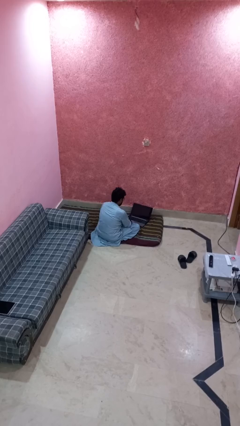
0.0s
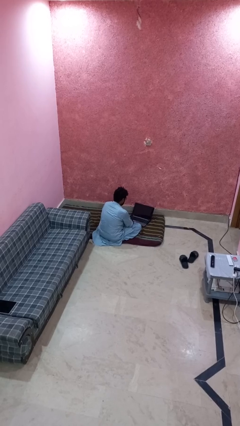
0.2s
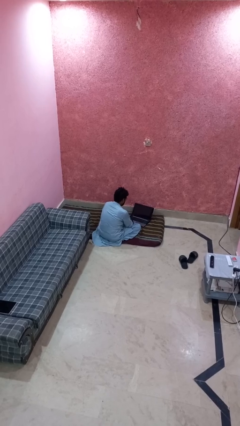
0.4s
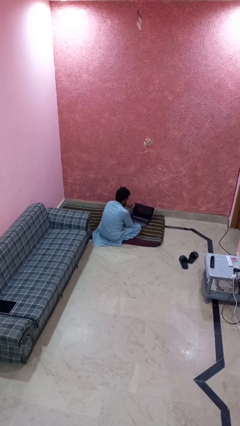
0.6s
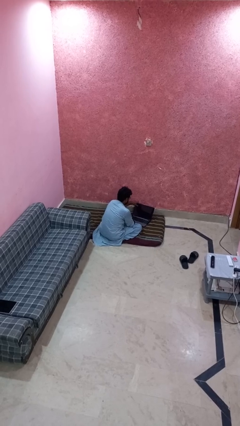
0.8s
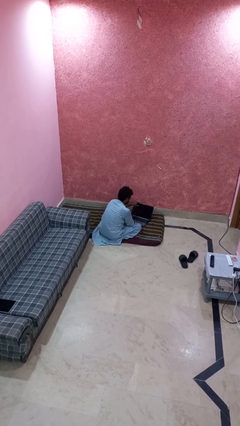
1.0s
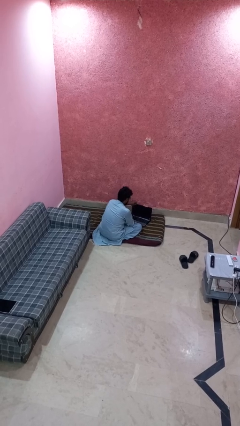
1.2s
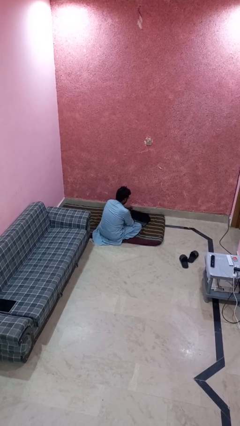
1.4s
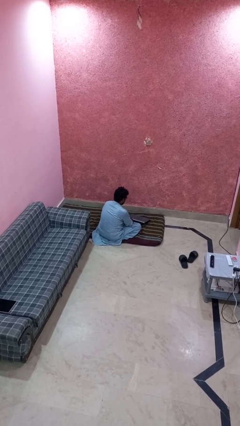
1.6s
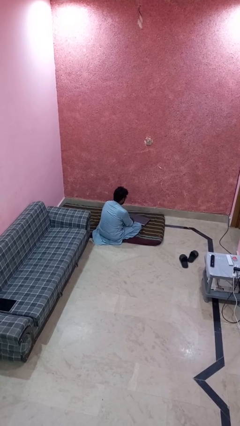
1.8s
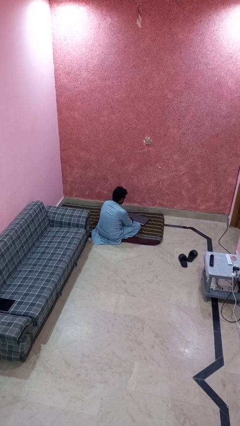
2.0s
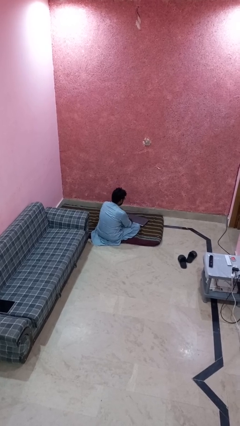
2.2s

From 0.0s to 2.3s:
person closes laptop

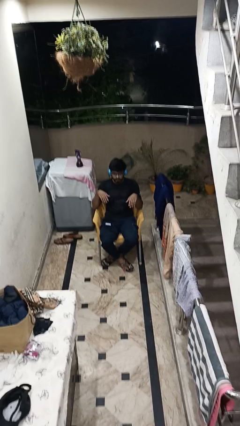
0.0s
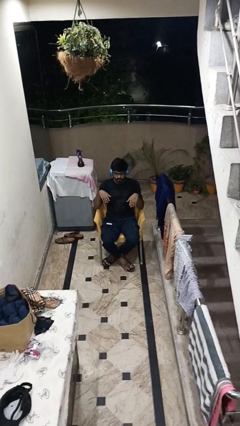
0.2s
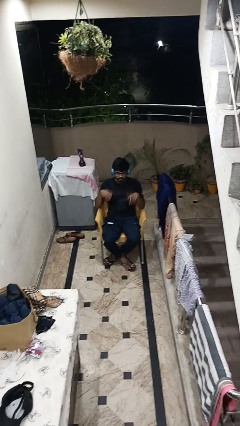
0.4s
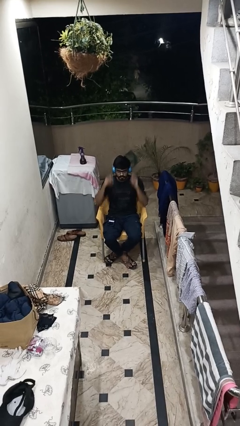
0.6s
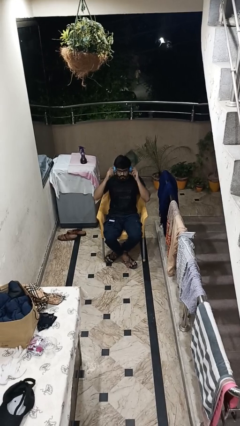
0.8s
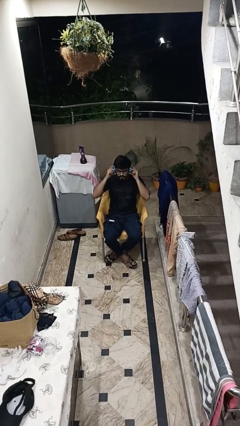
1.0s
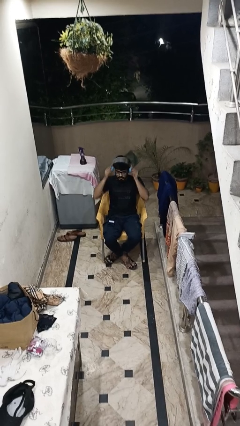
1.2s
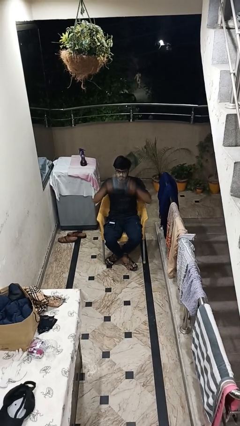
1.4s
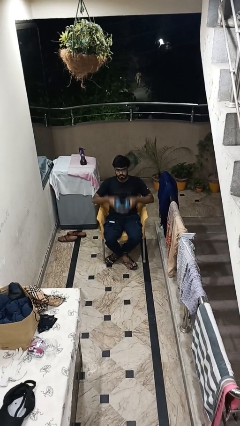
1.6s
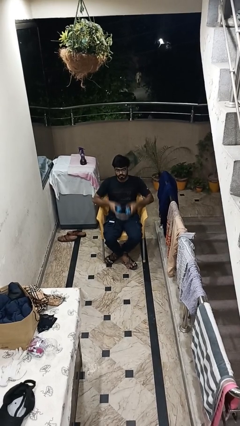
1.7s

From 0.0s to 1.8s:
person takes off headphones

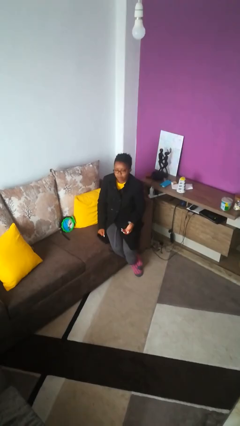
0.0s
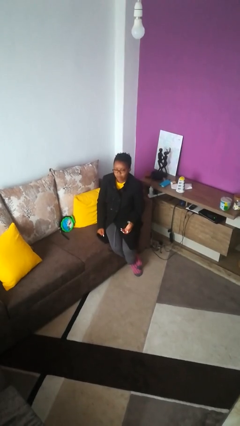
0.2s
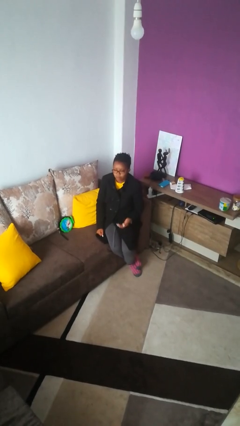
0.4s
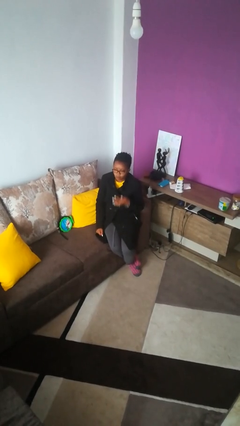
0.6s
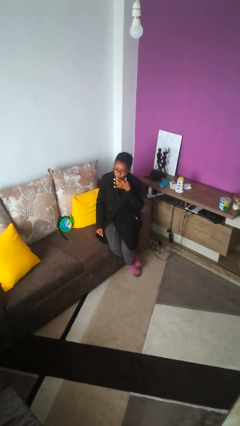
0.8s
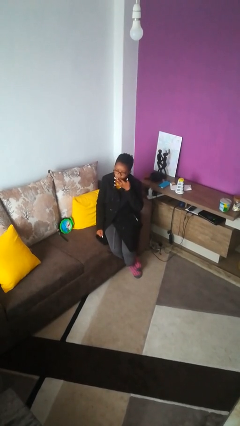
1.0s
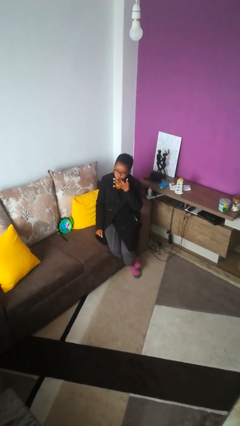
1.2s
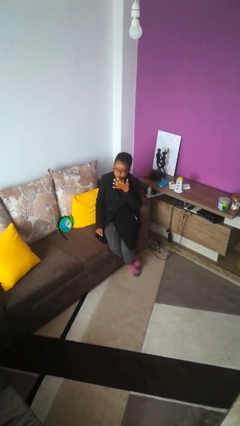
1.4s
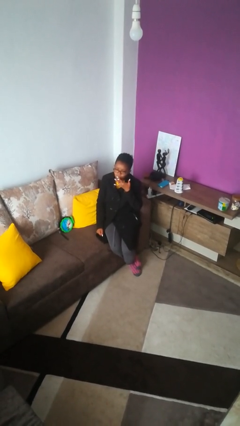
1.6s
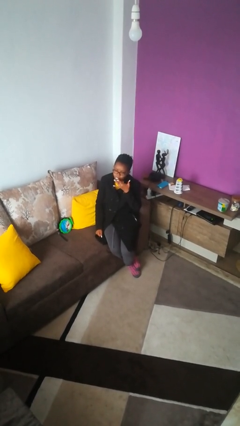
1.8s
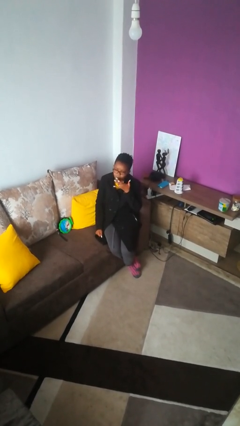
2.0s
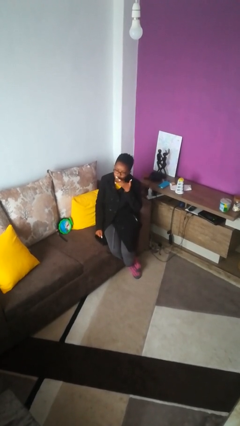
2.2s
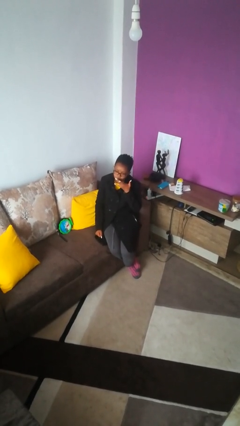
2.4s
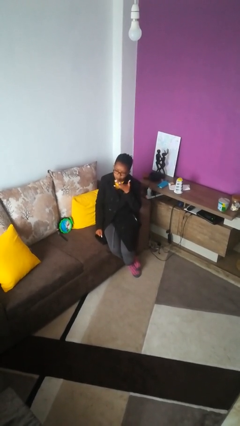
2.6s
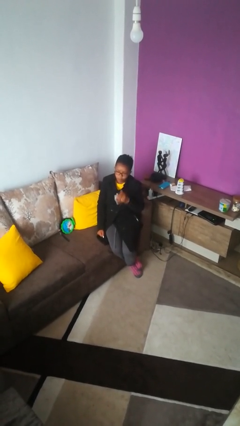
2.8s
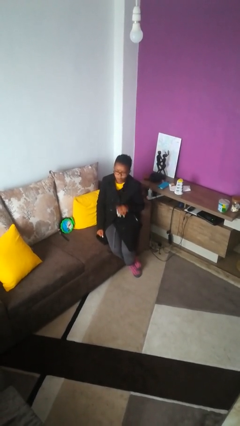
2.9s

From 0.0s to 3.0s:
person licks fingers

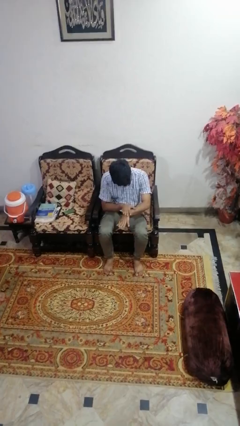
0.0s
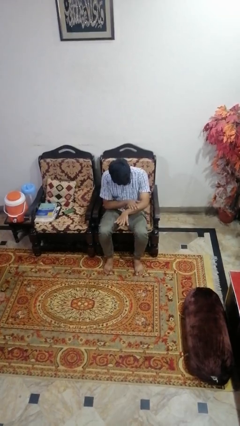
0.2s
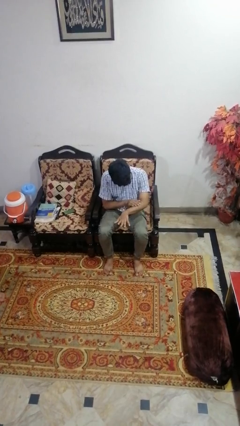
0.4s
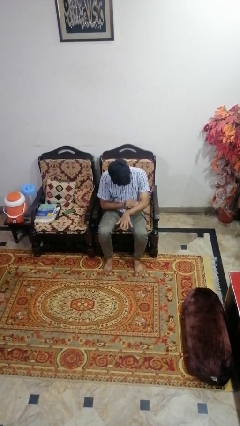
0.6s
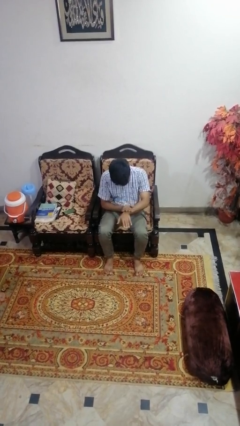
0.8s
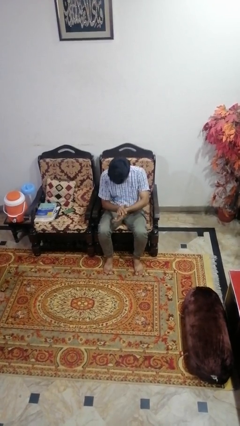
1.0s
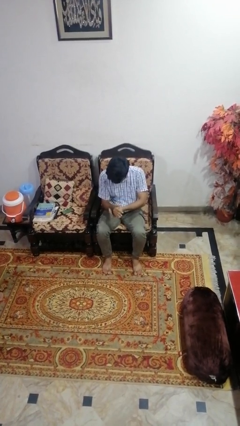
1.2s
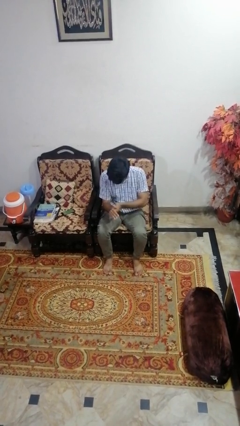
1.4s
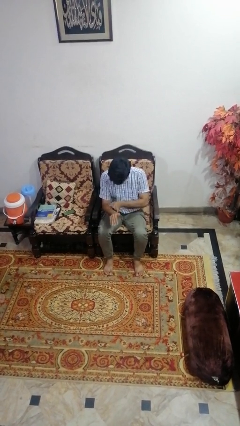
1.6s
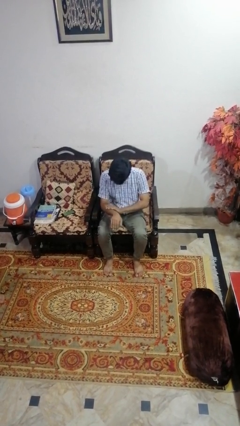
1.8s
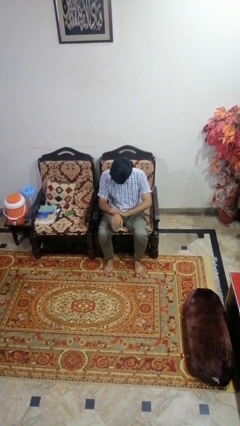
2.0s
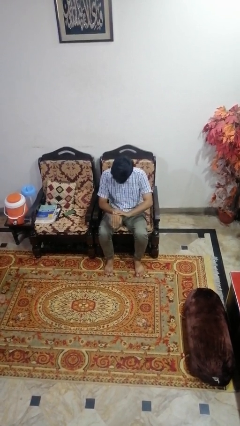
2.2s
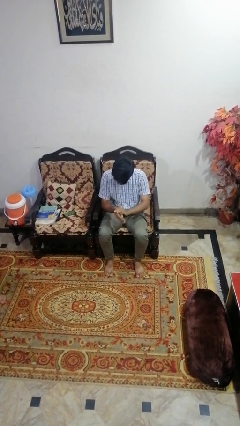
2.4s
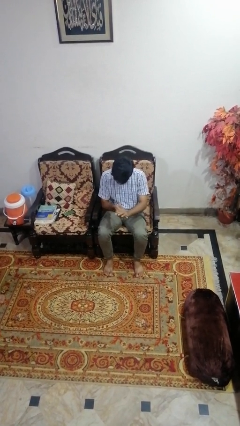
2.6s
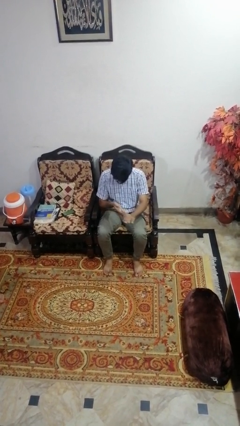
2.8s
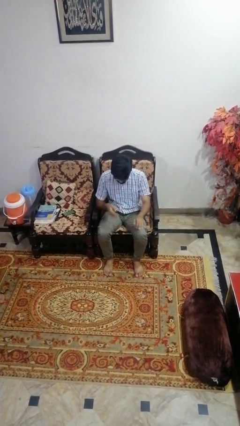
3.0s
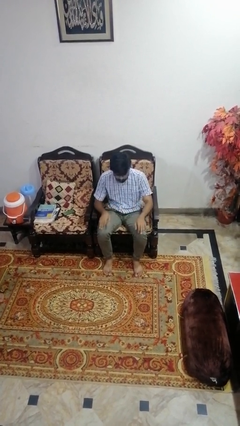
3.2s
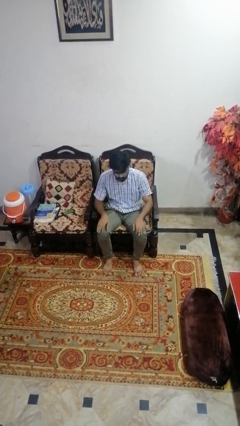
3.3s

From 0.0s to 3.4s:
person looks at hands in lap

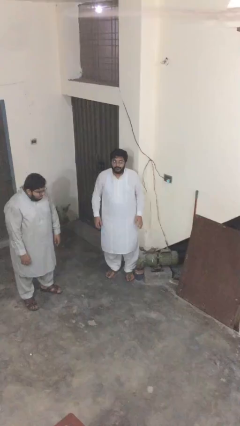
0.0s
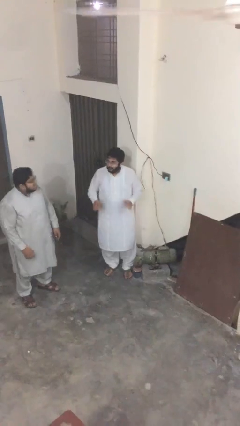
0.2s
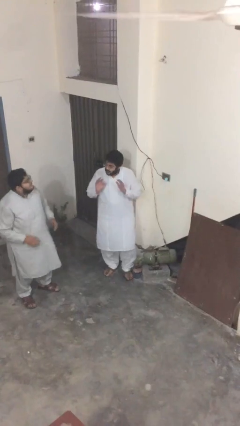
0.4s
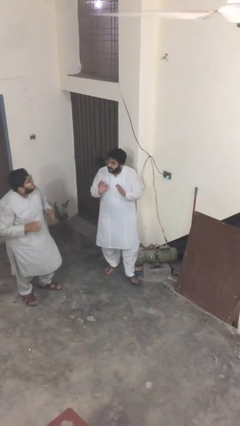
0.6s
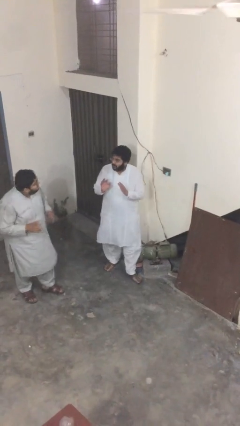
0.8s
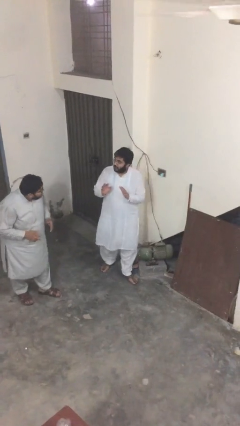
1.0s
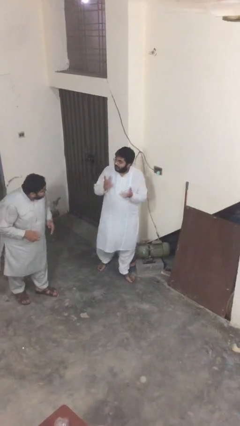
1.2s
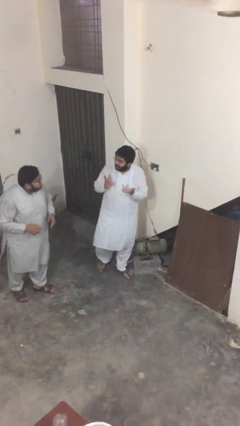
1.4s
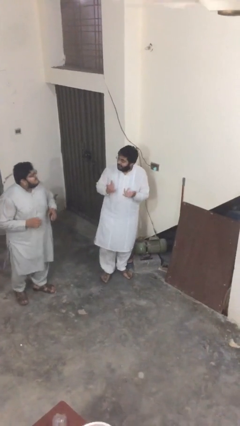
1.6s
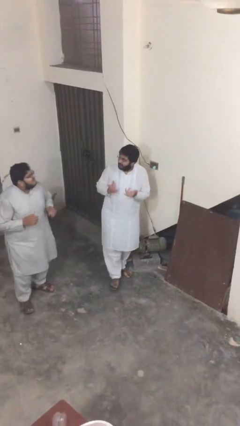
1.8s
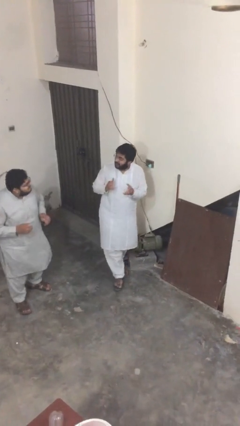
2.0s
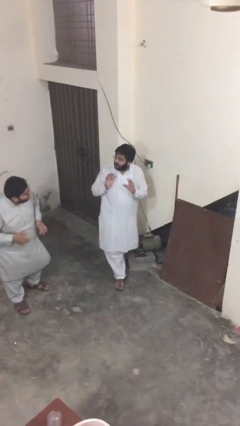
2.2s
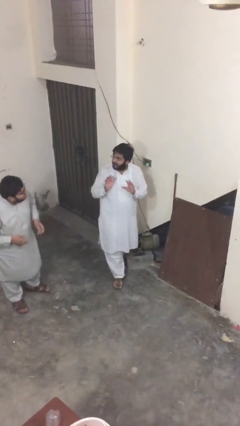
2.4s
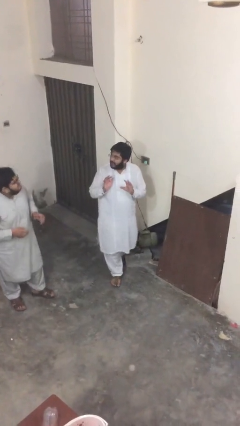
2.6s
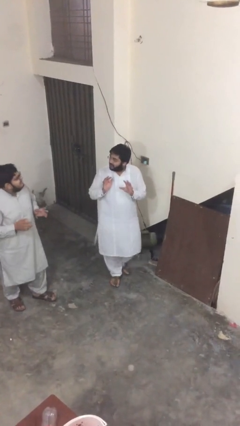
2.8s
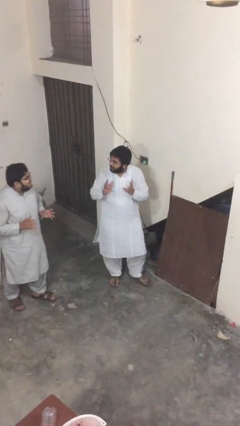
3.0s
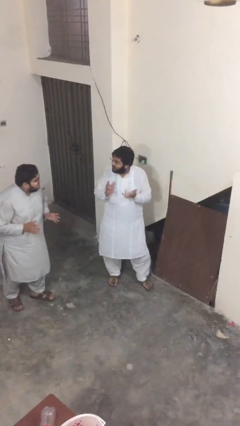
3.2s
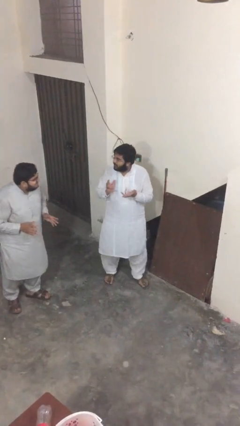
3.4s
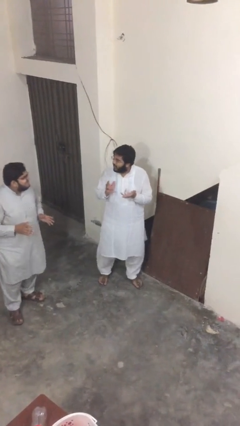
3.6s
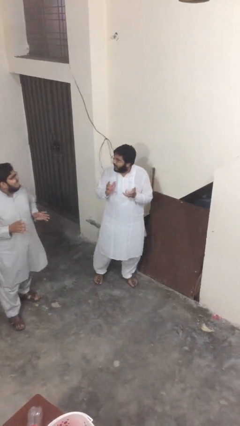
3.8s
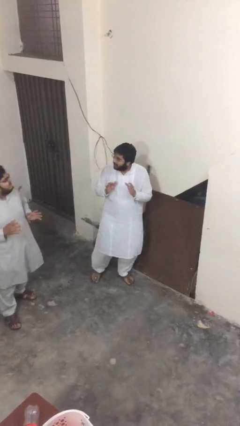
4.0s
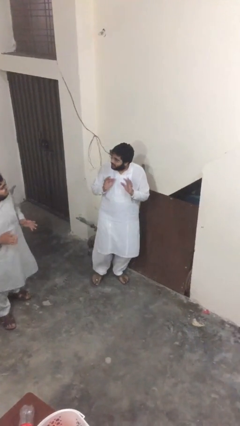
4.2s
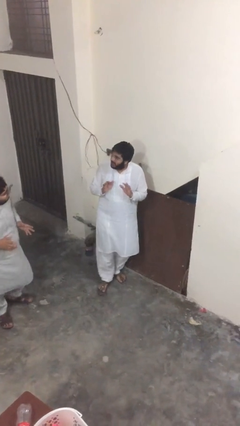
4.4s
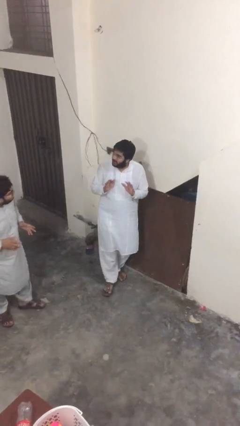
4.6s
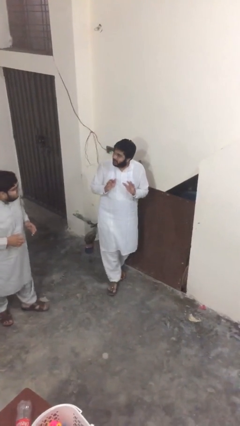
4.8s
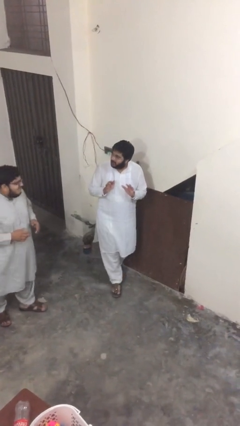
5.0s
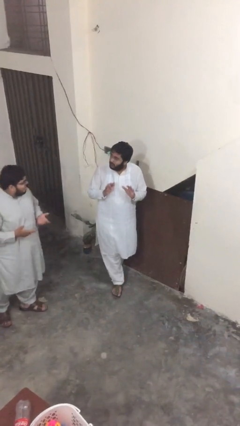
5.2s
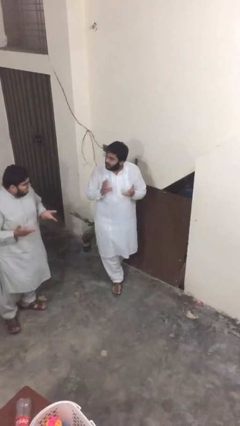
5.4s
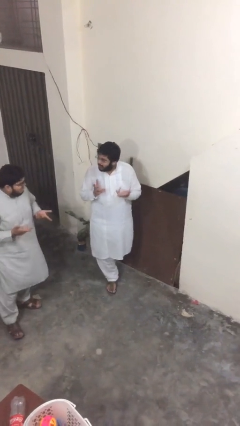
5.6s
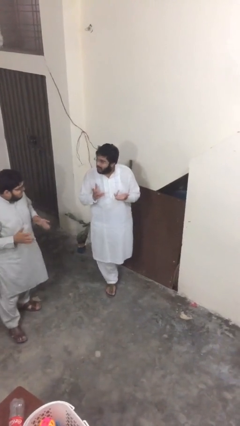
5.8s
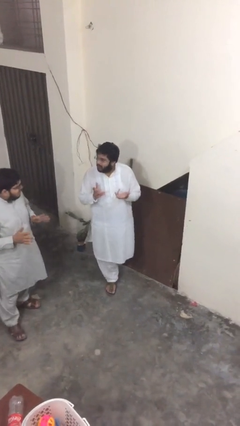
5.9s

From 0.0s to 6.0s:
person talks to person

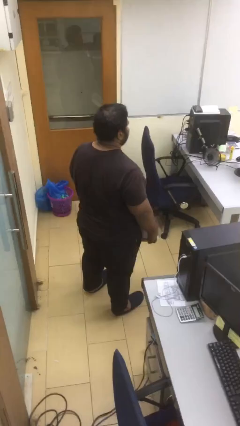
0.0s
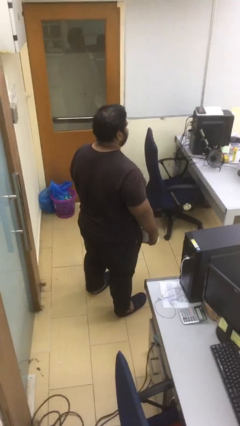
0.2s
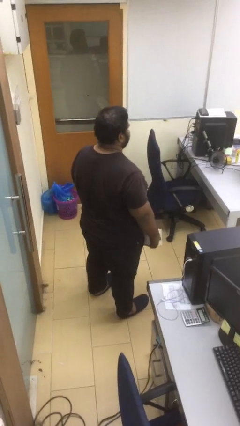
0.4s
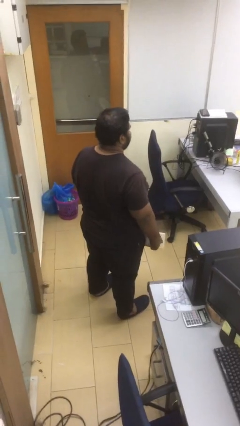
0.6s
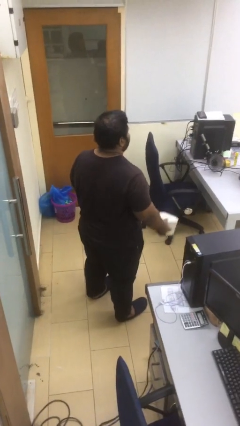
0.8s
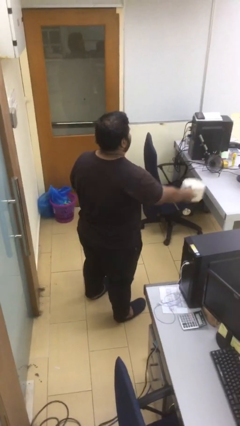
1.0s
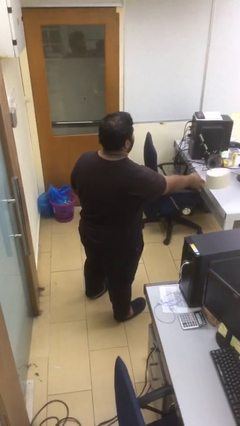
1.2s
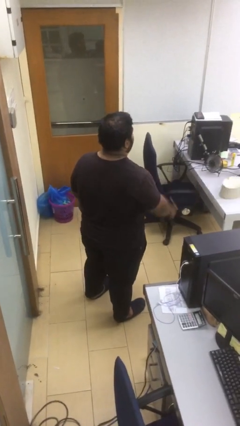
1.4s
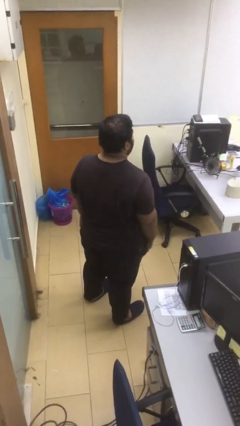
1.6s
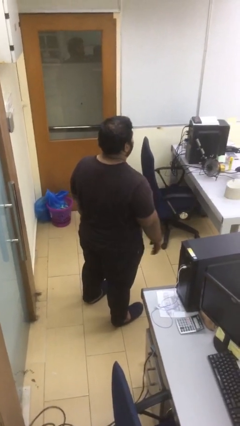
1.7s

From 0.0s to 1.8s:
person throws object on table
